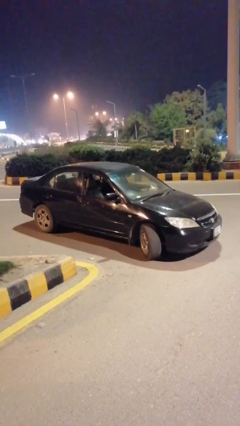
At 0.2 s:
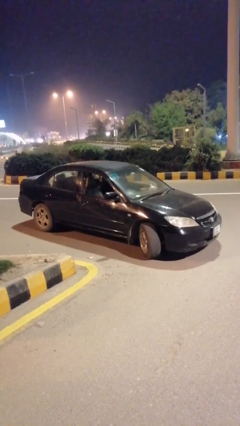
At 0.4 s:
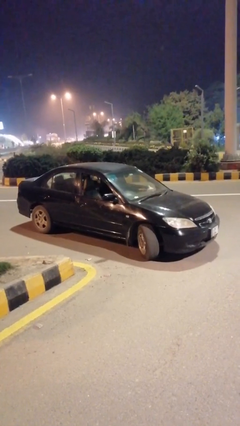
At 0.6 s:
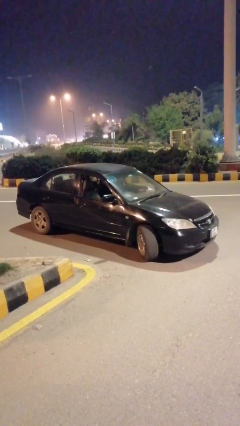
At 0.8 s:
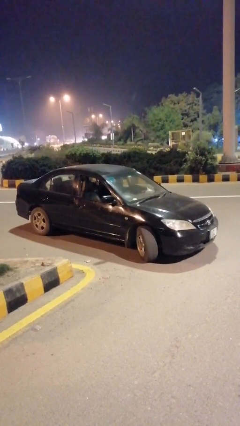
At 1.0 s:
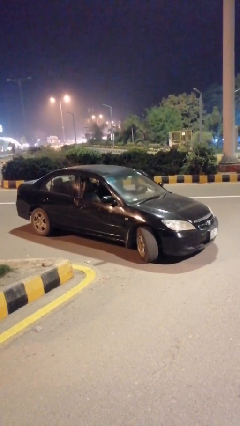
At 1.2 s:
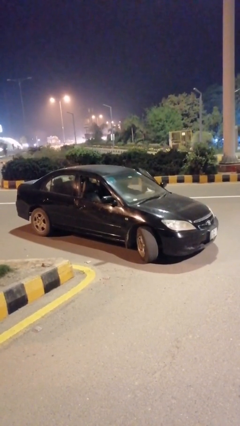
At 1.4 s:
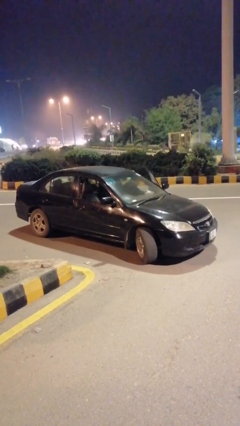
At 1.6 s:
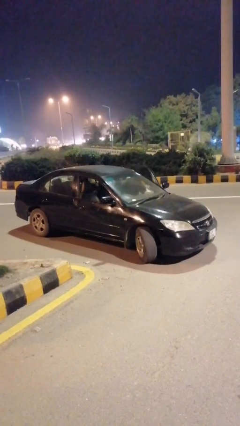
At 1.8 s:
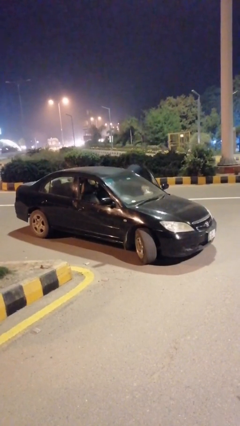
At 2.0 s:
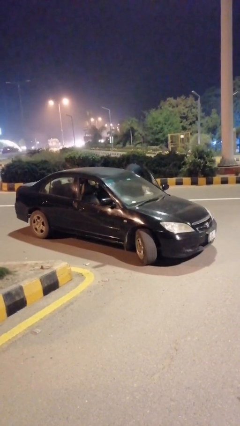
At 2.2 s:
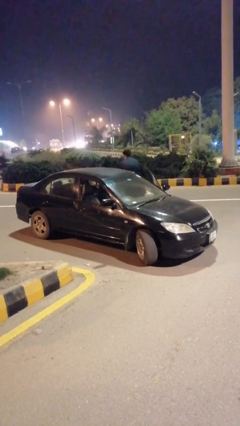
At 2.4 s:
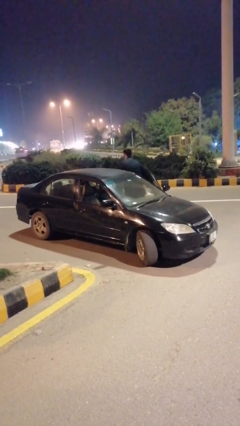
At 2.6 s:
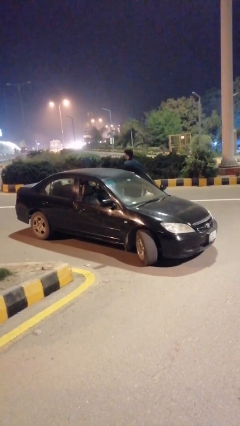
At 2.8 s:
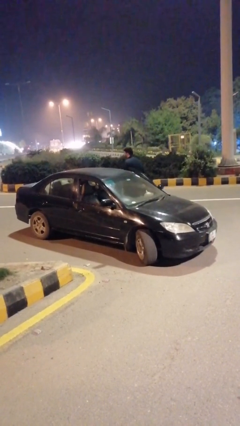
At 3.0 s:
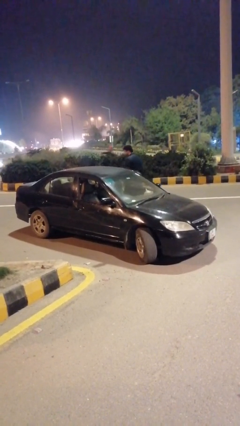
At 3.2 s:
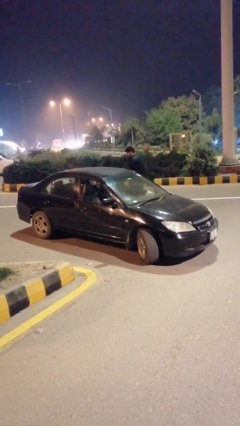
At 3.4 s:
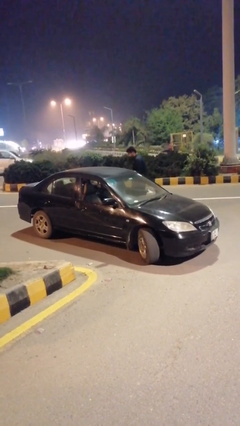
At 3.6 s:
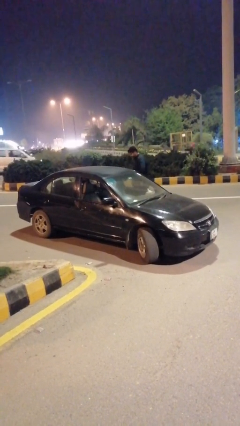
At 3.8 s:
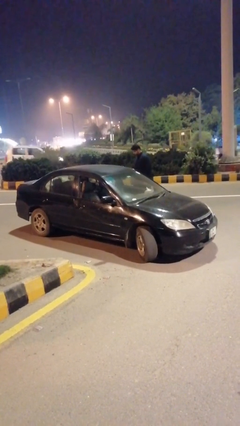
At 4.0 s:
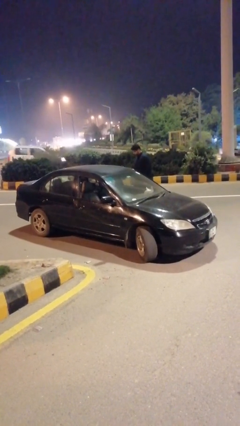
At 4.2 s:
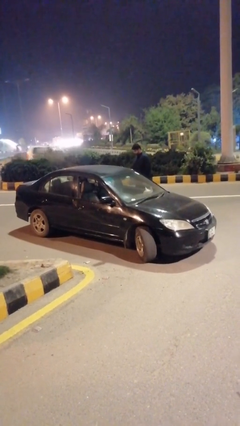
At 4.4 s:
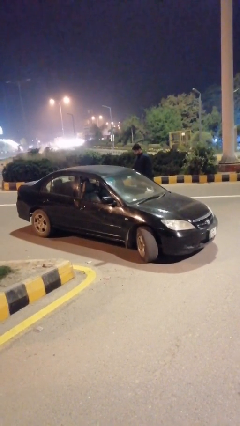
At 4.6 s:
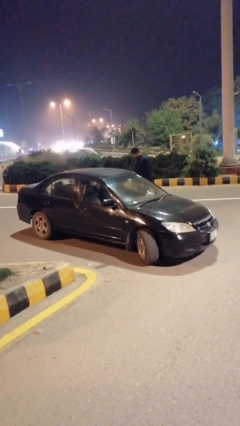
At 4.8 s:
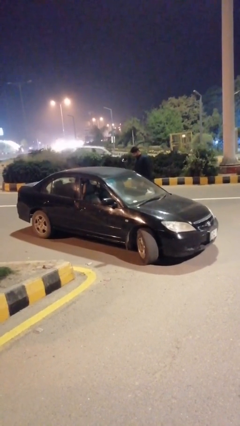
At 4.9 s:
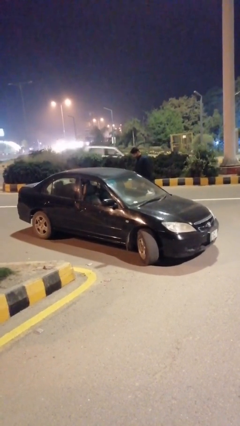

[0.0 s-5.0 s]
car drops off person

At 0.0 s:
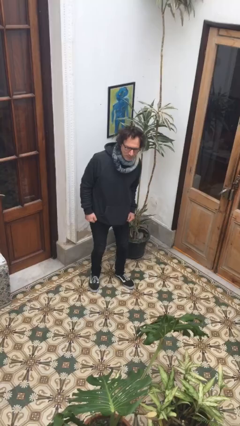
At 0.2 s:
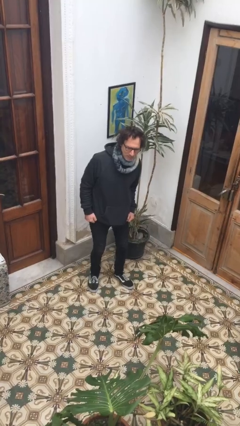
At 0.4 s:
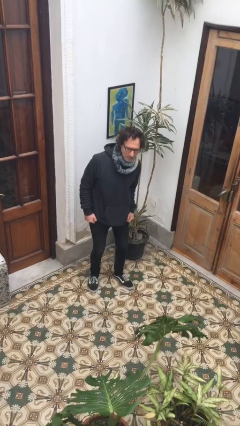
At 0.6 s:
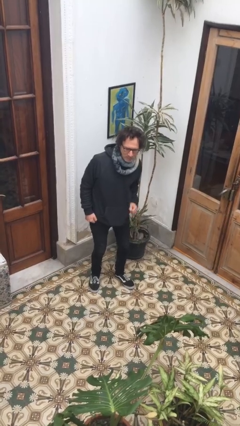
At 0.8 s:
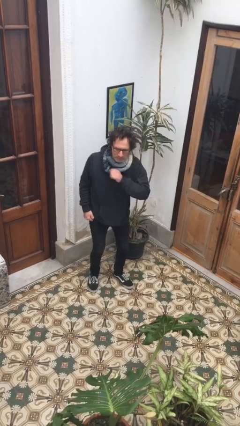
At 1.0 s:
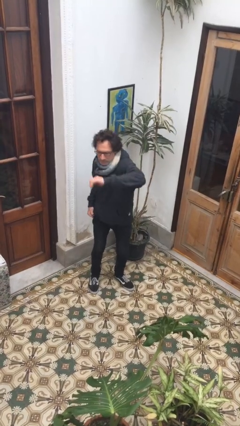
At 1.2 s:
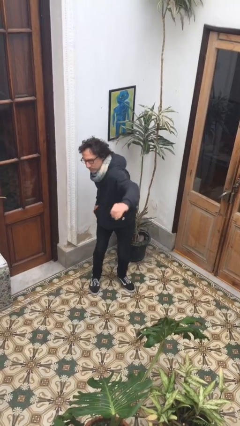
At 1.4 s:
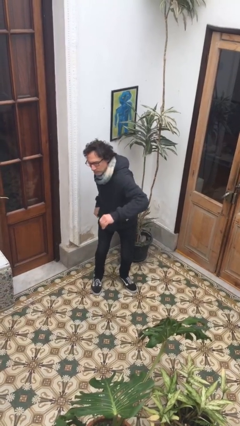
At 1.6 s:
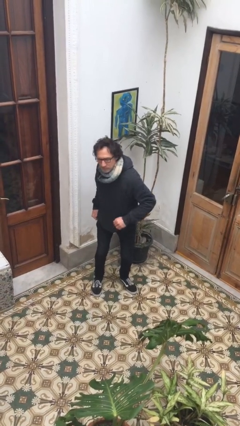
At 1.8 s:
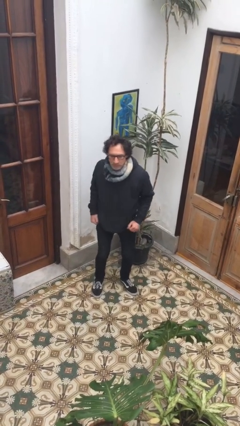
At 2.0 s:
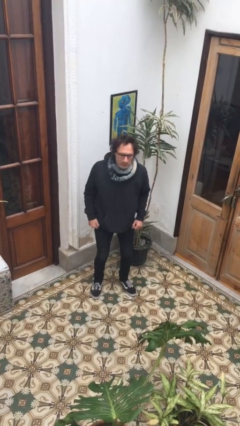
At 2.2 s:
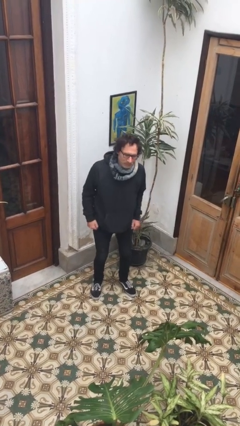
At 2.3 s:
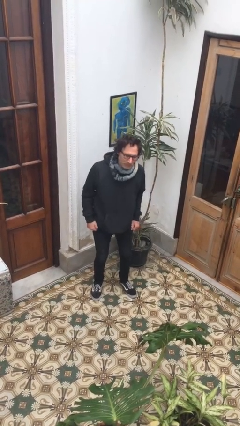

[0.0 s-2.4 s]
person karate chop

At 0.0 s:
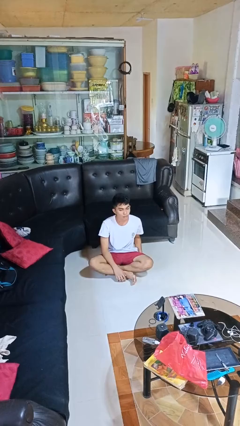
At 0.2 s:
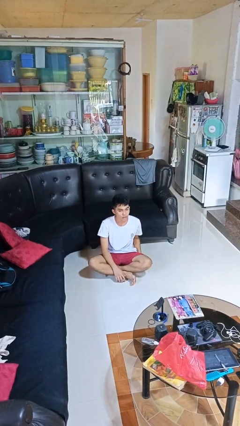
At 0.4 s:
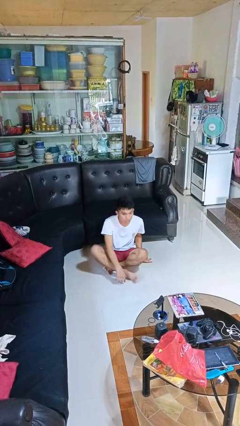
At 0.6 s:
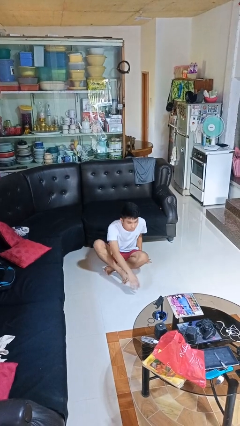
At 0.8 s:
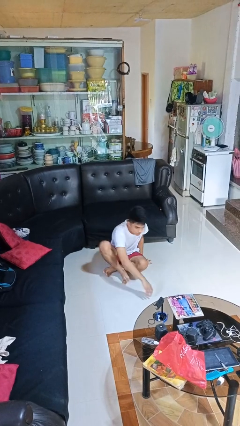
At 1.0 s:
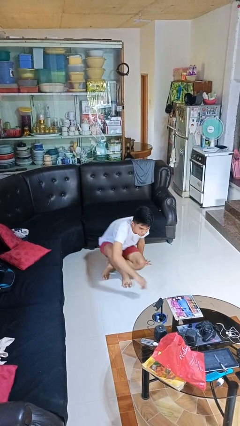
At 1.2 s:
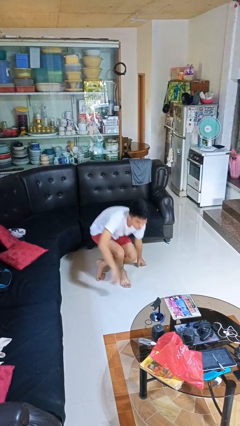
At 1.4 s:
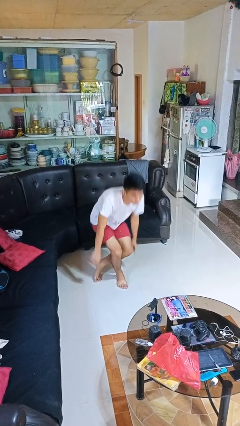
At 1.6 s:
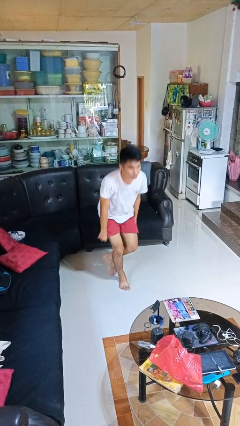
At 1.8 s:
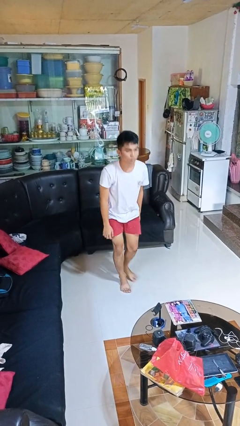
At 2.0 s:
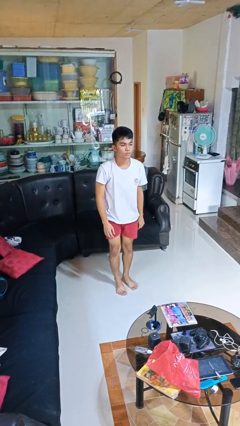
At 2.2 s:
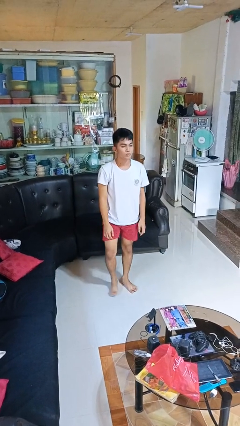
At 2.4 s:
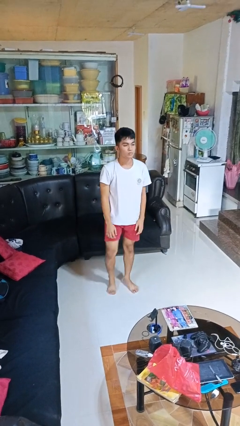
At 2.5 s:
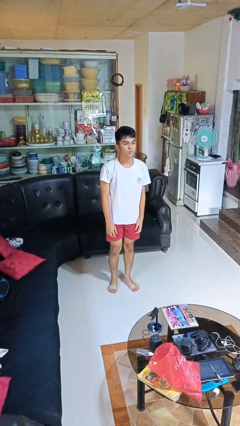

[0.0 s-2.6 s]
person stands up from floor

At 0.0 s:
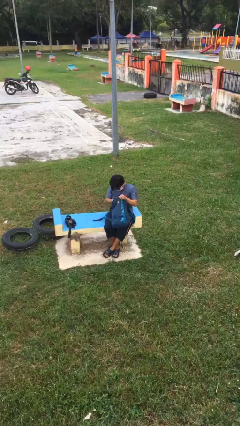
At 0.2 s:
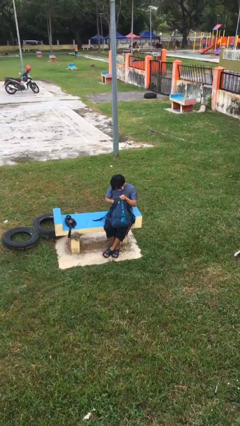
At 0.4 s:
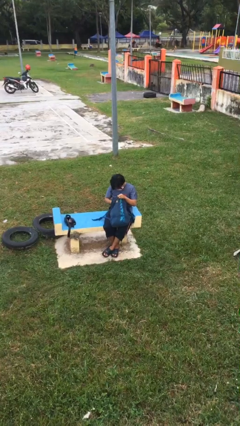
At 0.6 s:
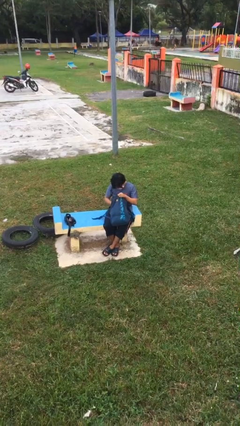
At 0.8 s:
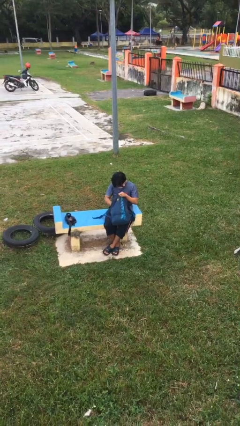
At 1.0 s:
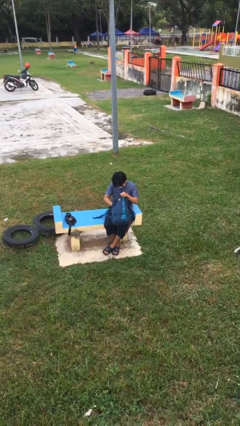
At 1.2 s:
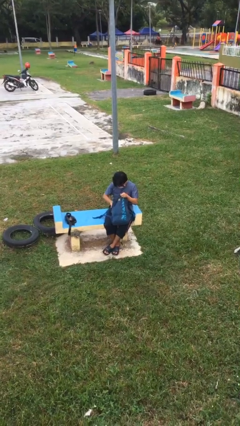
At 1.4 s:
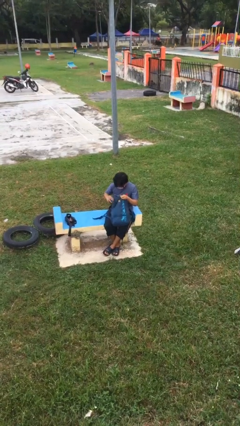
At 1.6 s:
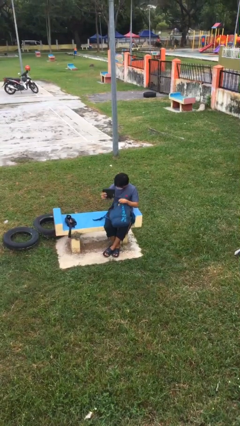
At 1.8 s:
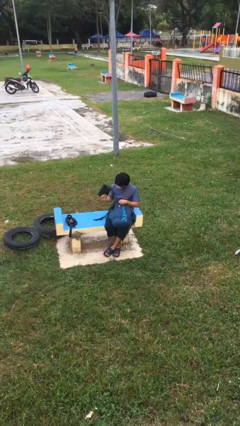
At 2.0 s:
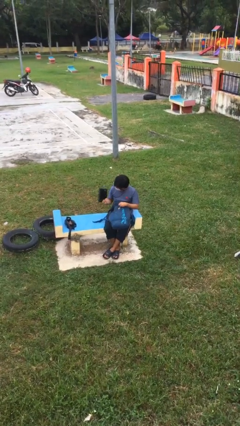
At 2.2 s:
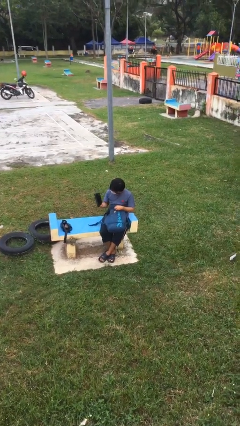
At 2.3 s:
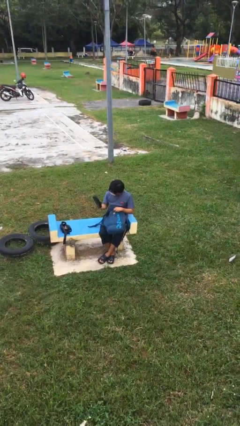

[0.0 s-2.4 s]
person takes object from backpack

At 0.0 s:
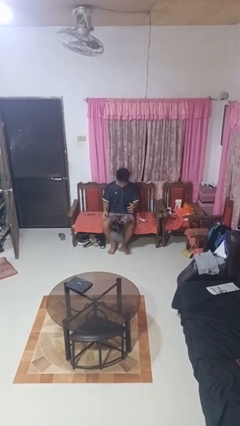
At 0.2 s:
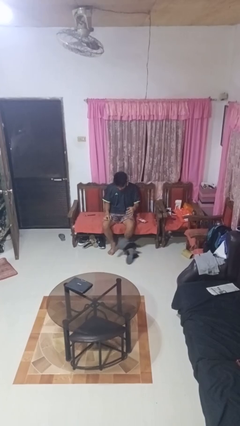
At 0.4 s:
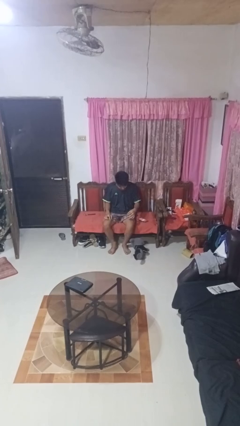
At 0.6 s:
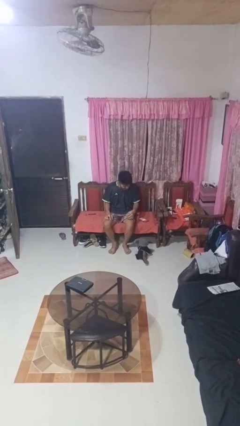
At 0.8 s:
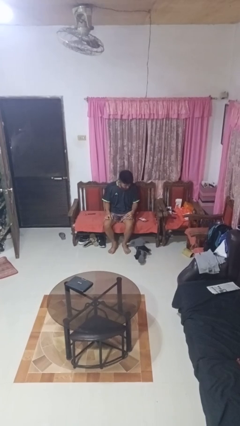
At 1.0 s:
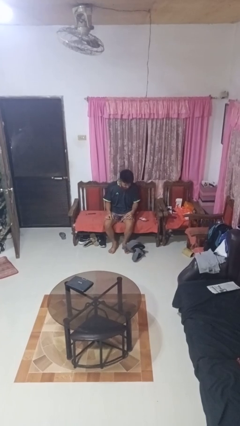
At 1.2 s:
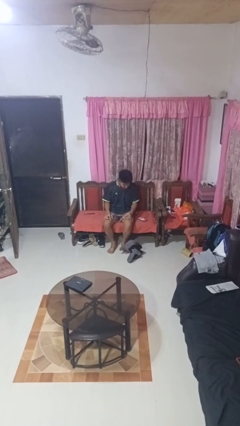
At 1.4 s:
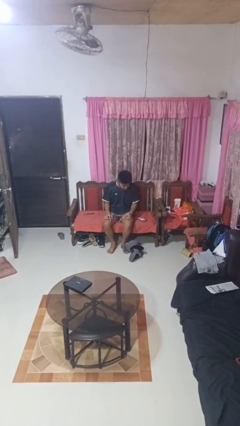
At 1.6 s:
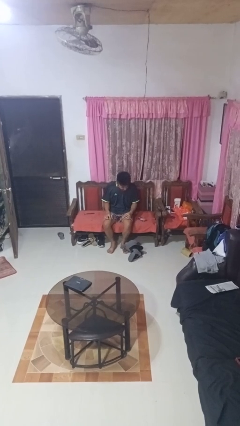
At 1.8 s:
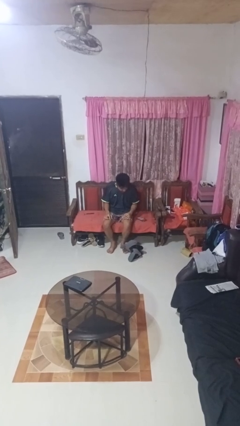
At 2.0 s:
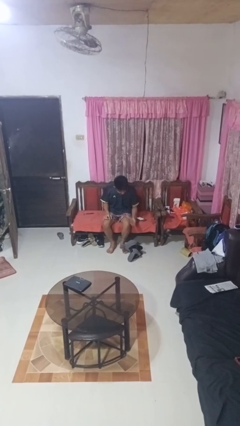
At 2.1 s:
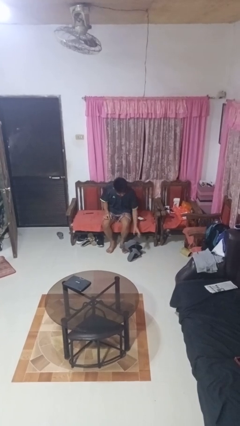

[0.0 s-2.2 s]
person drops object

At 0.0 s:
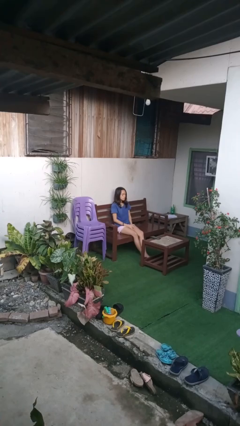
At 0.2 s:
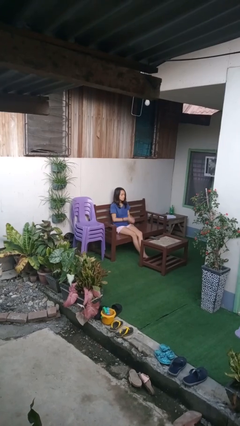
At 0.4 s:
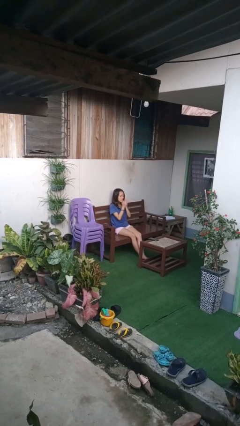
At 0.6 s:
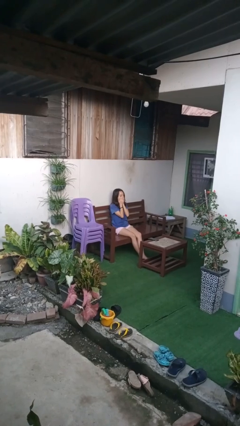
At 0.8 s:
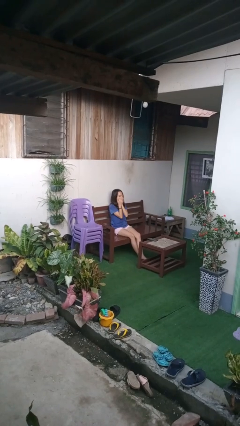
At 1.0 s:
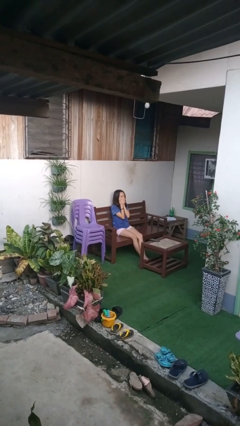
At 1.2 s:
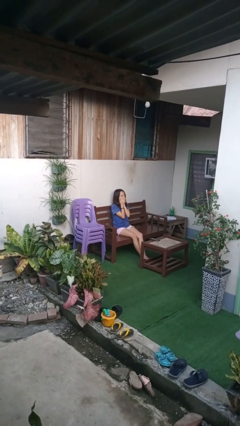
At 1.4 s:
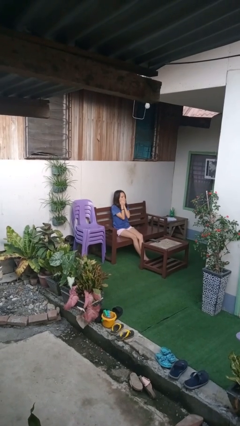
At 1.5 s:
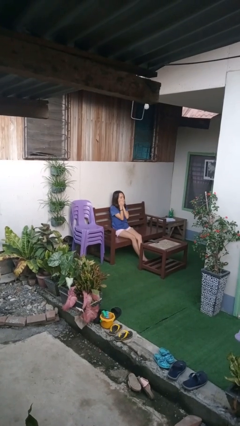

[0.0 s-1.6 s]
person yawns

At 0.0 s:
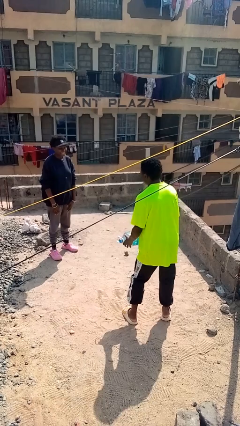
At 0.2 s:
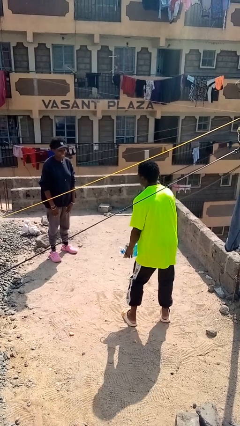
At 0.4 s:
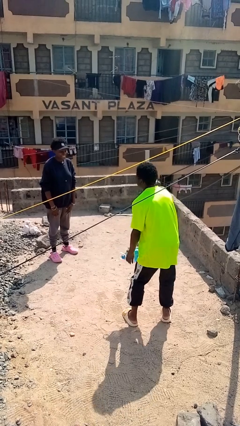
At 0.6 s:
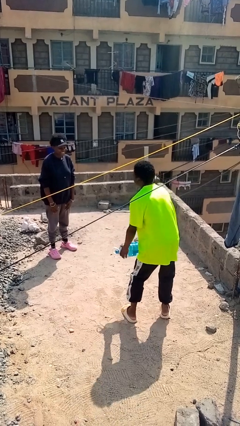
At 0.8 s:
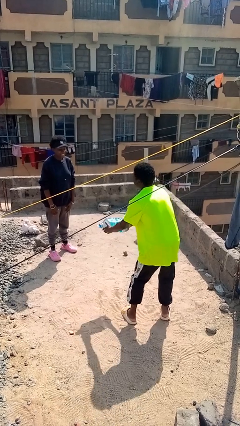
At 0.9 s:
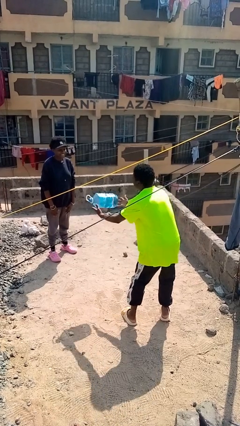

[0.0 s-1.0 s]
person throws object to person
